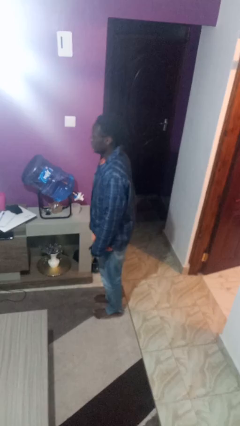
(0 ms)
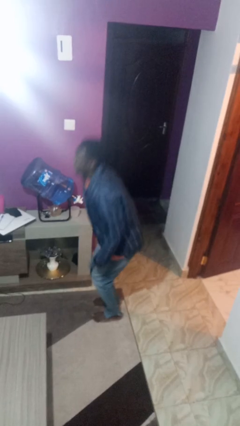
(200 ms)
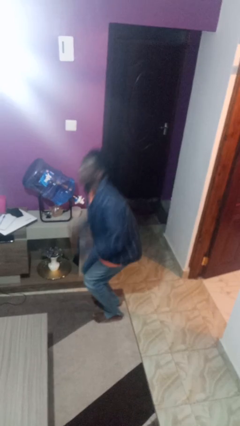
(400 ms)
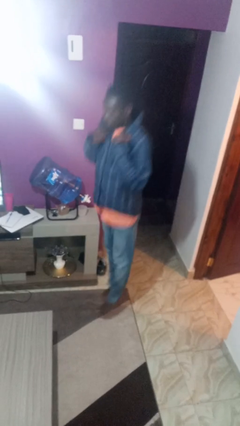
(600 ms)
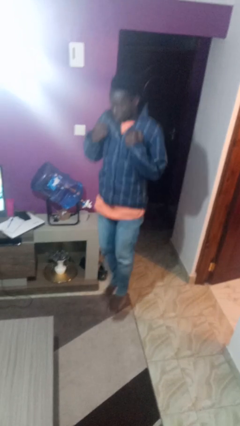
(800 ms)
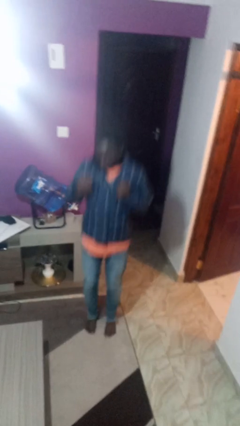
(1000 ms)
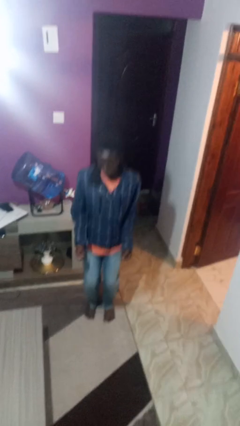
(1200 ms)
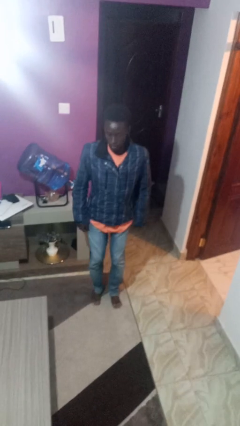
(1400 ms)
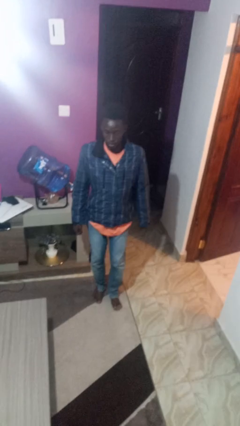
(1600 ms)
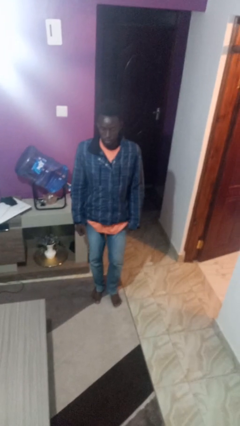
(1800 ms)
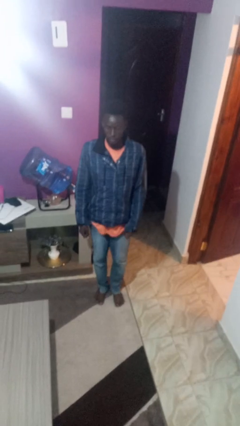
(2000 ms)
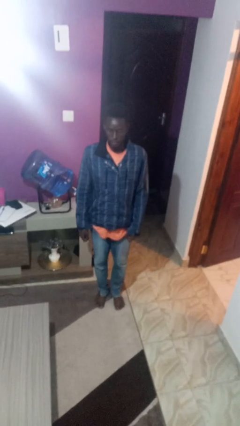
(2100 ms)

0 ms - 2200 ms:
person jumps

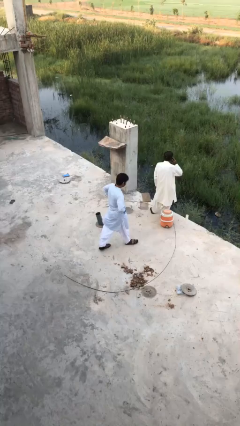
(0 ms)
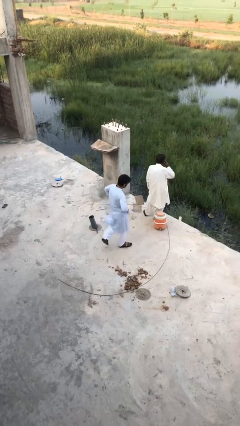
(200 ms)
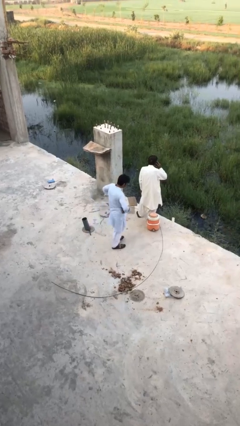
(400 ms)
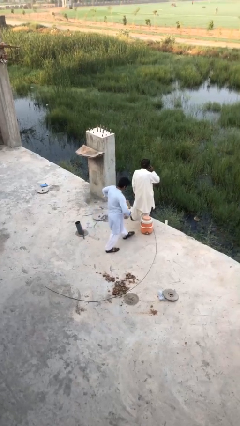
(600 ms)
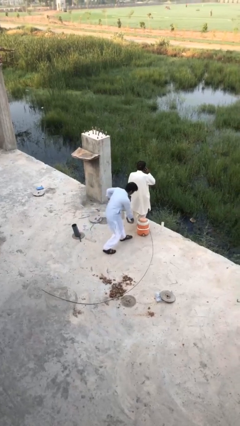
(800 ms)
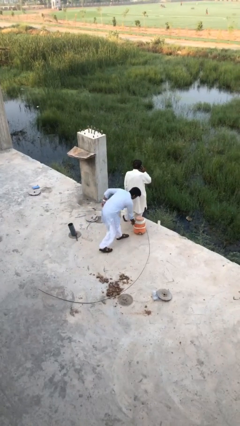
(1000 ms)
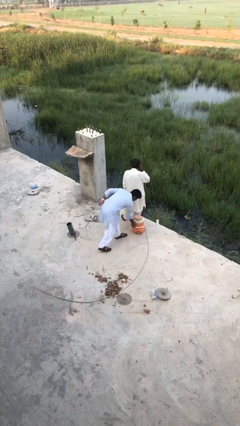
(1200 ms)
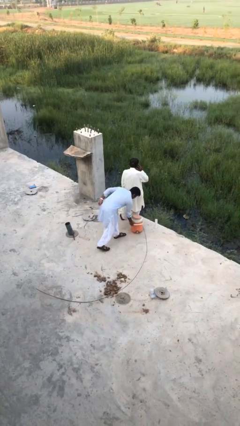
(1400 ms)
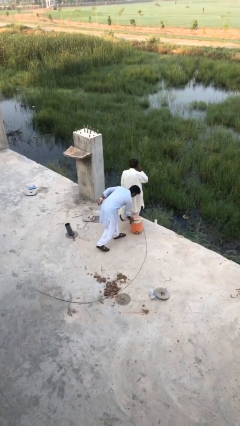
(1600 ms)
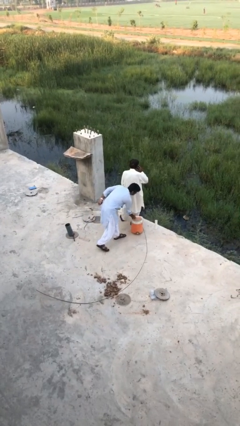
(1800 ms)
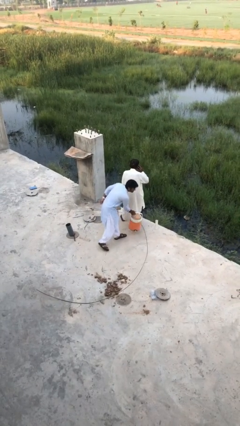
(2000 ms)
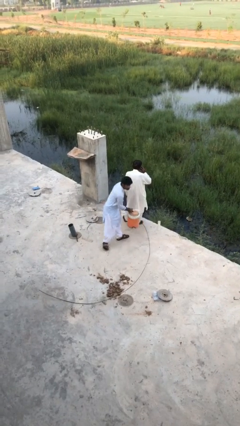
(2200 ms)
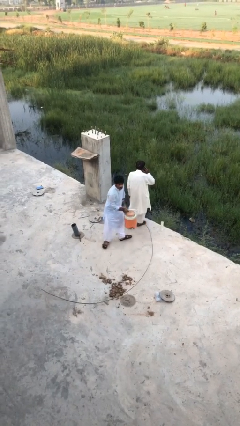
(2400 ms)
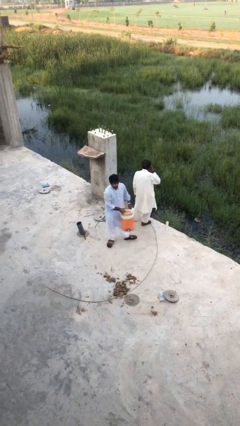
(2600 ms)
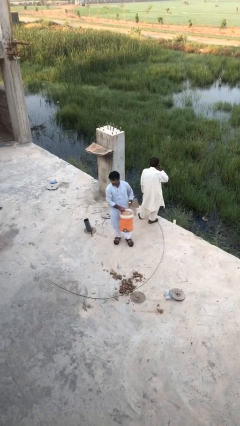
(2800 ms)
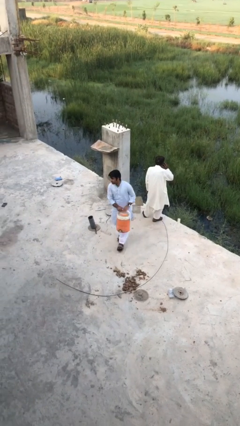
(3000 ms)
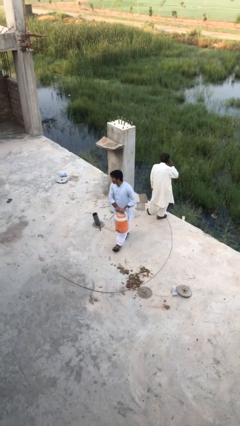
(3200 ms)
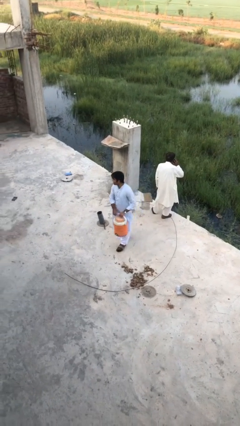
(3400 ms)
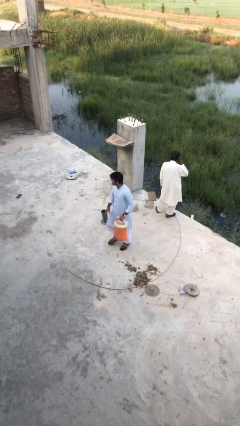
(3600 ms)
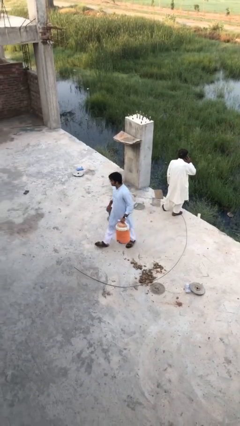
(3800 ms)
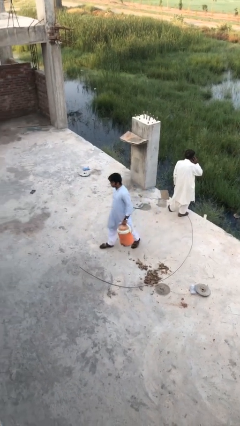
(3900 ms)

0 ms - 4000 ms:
person steals object from person

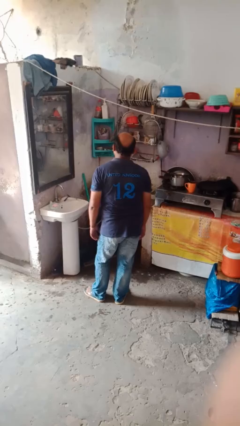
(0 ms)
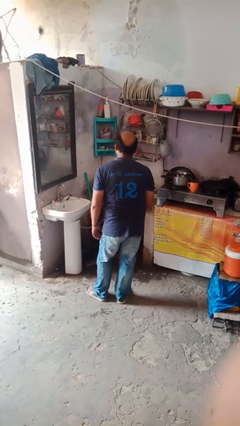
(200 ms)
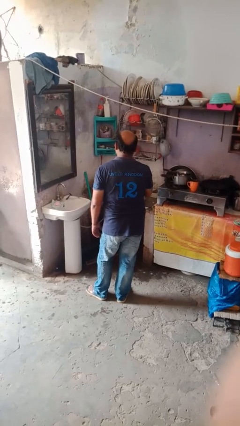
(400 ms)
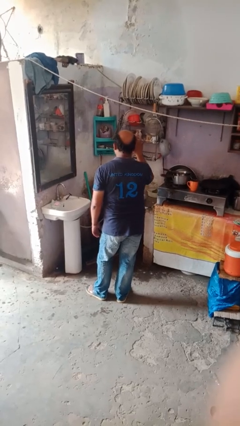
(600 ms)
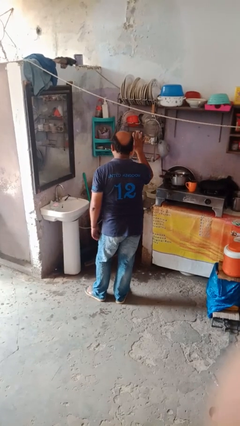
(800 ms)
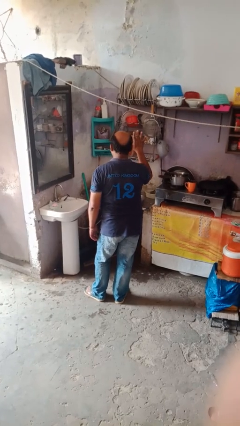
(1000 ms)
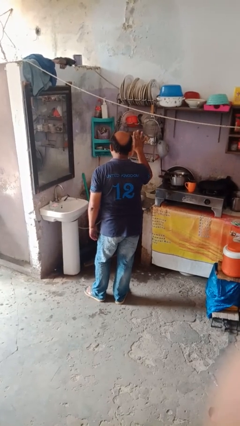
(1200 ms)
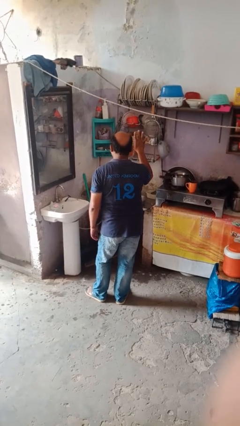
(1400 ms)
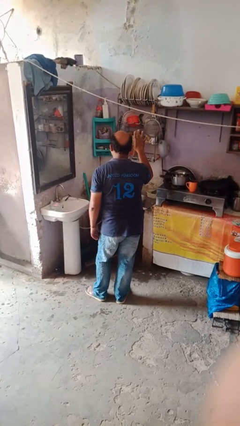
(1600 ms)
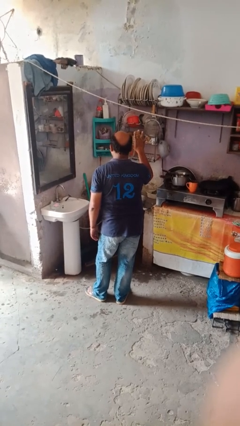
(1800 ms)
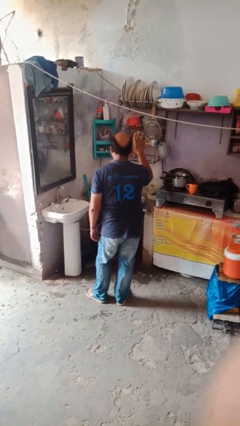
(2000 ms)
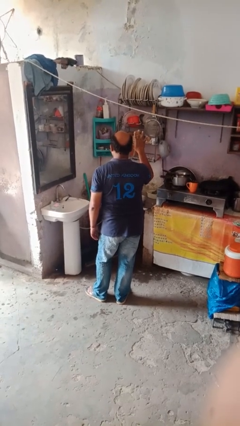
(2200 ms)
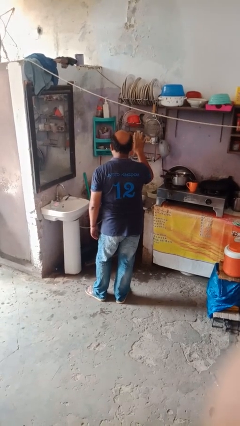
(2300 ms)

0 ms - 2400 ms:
person gestures number five

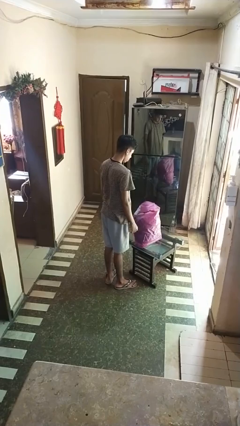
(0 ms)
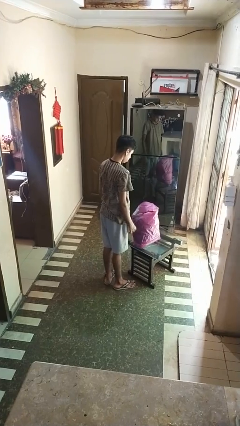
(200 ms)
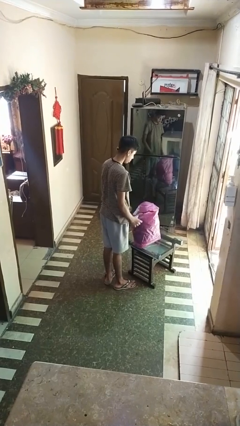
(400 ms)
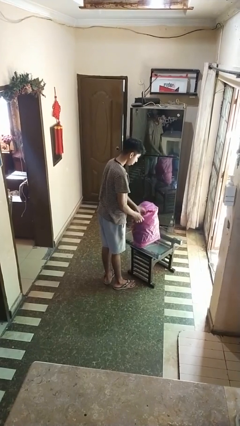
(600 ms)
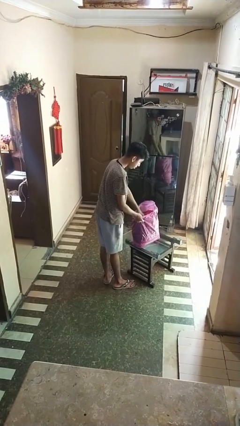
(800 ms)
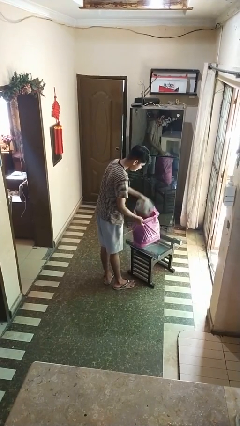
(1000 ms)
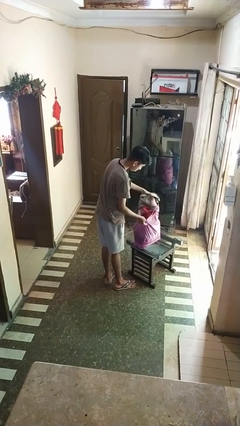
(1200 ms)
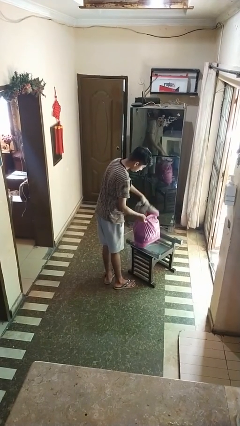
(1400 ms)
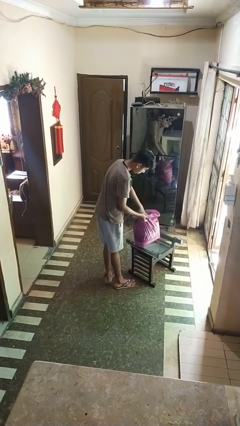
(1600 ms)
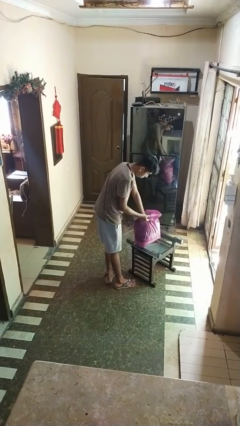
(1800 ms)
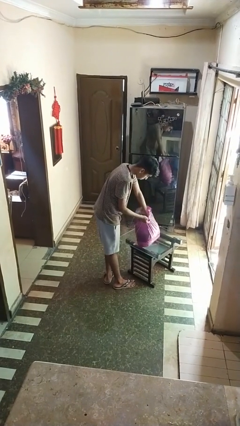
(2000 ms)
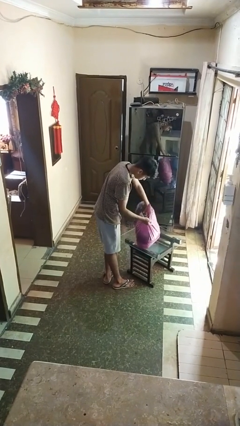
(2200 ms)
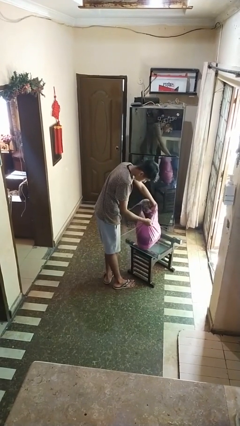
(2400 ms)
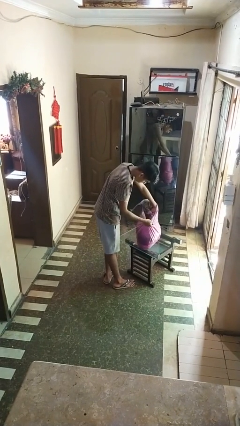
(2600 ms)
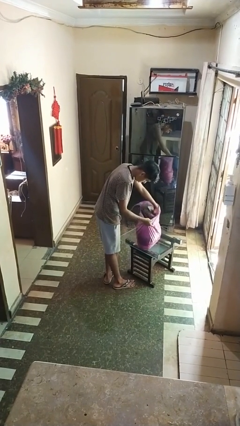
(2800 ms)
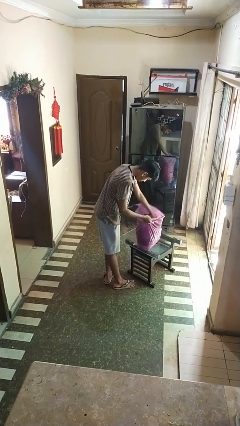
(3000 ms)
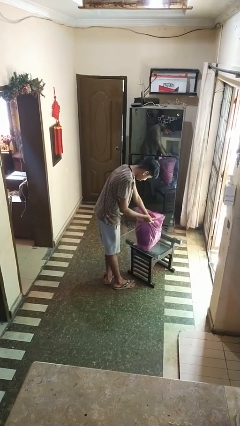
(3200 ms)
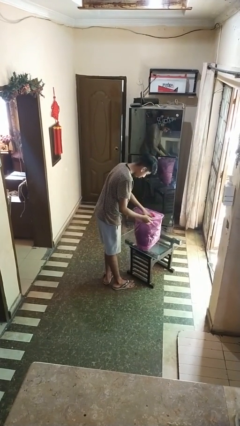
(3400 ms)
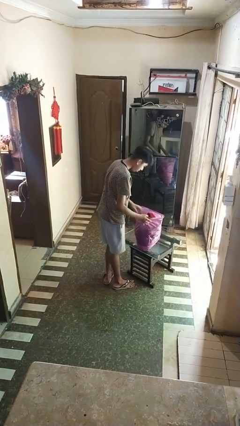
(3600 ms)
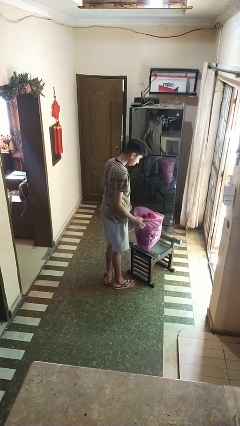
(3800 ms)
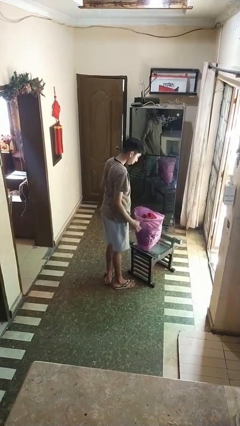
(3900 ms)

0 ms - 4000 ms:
person searches in bag

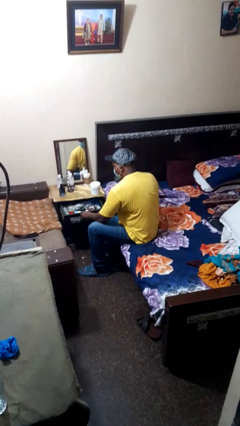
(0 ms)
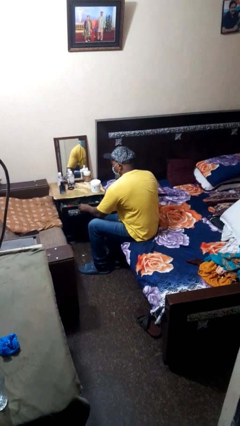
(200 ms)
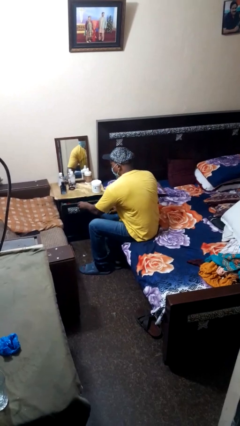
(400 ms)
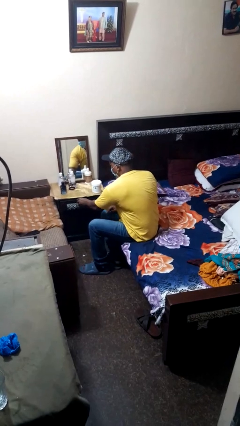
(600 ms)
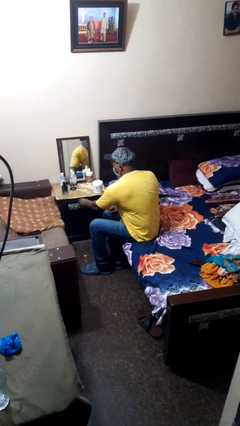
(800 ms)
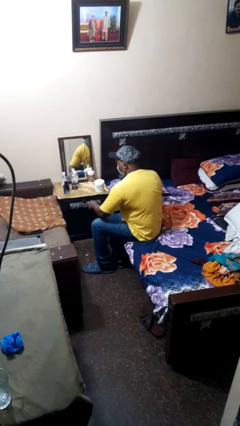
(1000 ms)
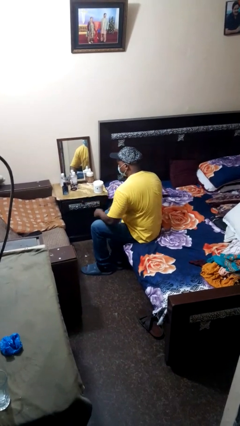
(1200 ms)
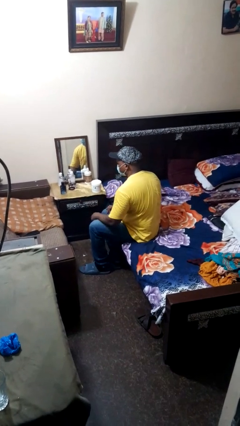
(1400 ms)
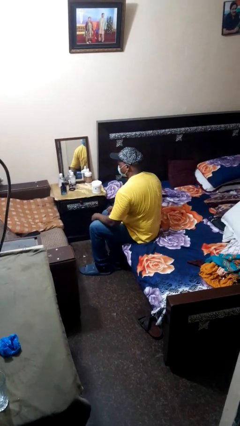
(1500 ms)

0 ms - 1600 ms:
person closes dresser drawer

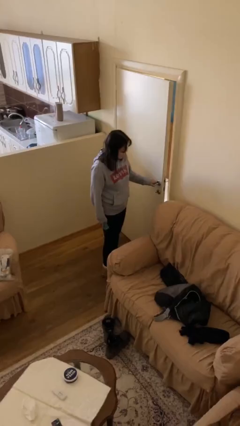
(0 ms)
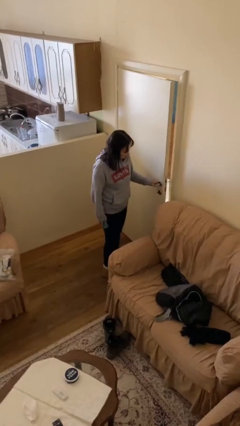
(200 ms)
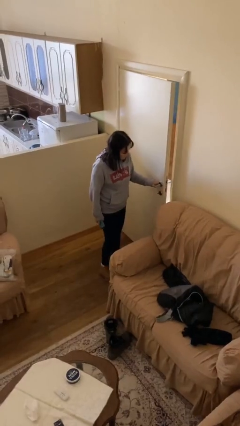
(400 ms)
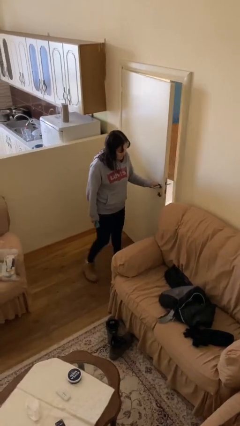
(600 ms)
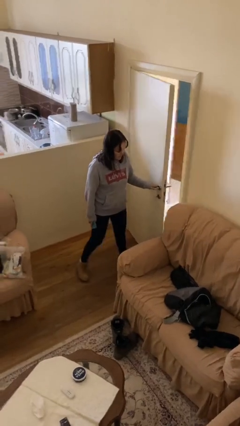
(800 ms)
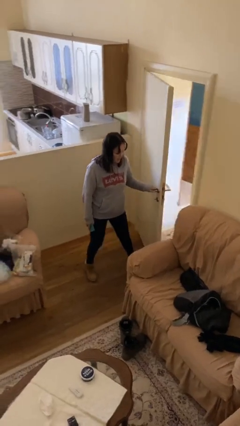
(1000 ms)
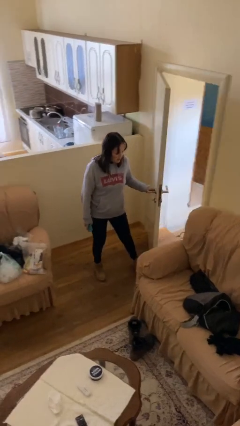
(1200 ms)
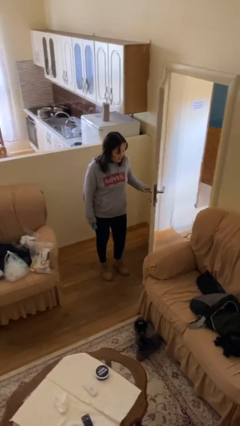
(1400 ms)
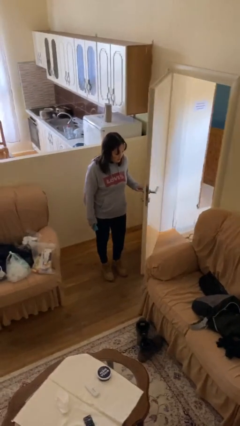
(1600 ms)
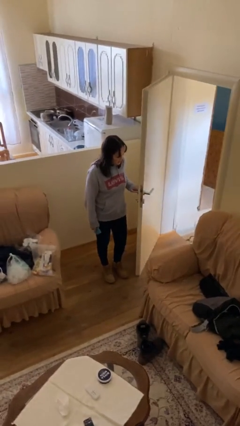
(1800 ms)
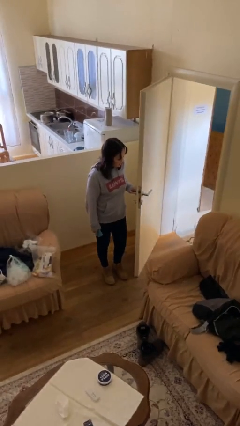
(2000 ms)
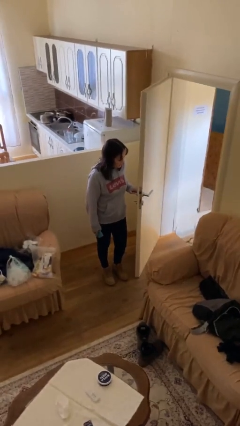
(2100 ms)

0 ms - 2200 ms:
person opens facility door

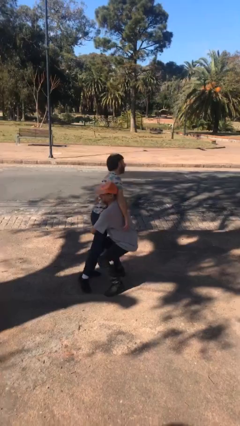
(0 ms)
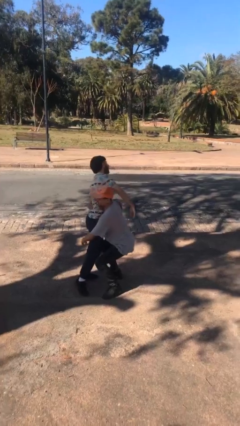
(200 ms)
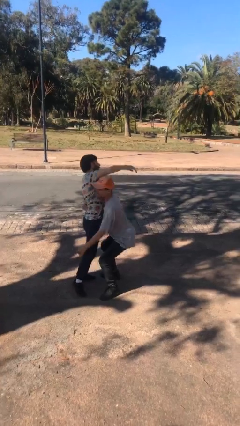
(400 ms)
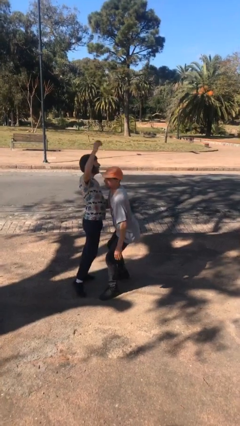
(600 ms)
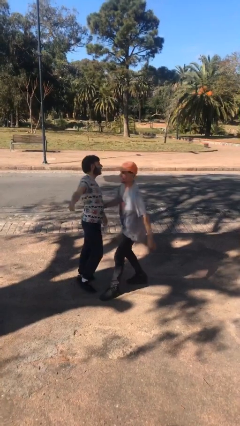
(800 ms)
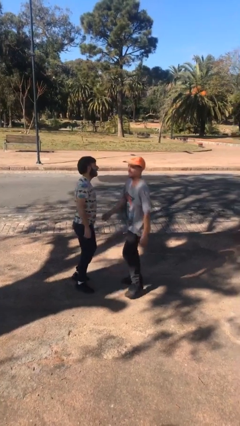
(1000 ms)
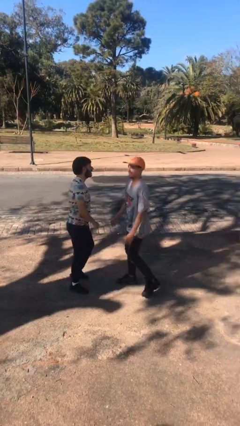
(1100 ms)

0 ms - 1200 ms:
person puts down person
